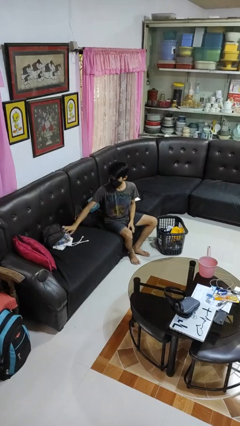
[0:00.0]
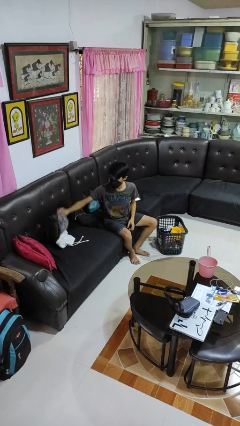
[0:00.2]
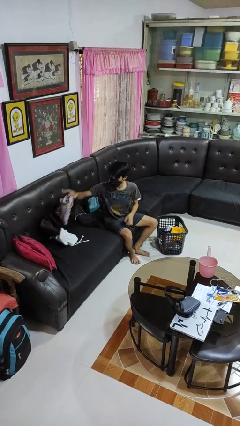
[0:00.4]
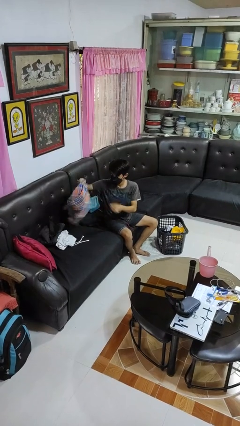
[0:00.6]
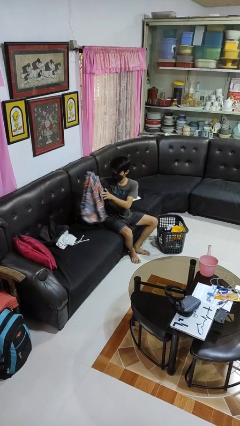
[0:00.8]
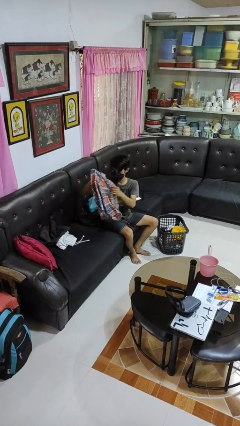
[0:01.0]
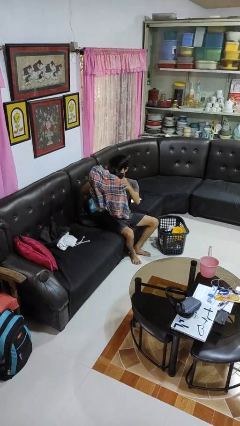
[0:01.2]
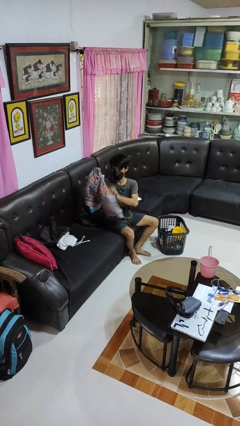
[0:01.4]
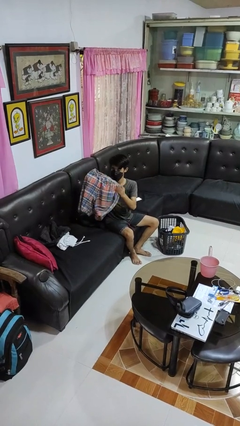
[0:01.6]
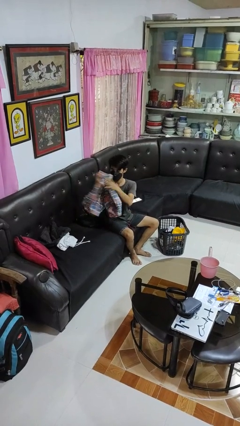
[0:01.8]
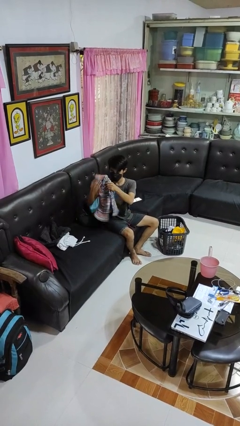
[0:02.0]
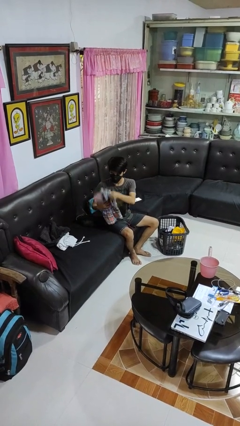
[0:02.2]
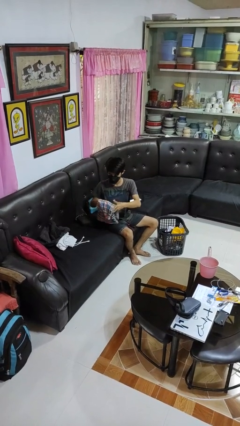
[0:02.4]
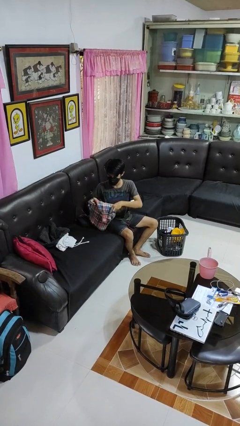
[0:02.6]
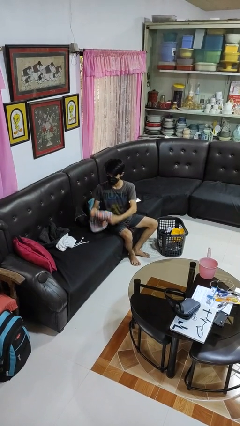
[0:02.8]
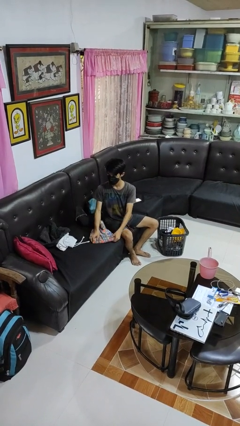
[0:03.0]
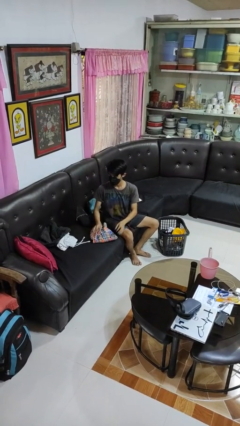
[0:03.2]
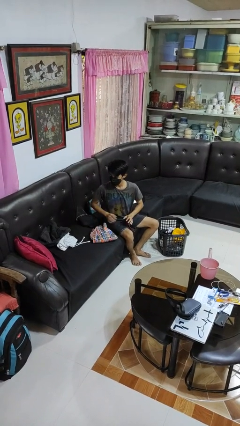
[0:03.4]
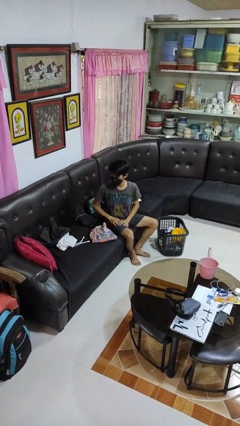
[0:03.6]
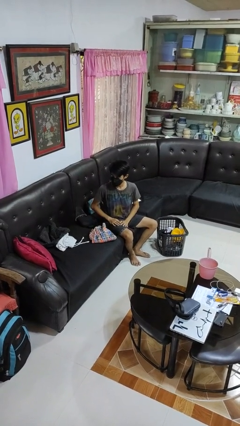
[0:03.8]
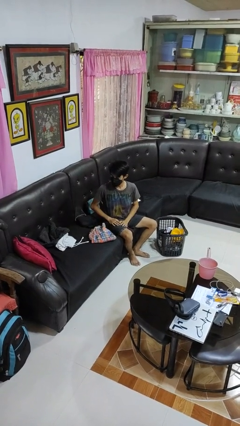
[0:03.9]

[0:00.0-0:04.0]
person folds pants

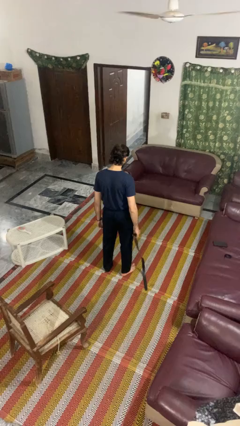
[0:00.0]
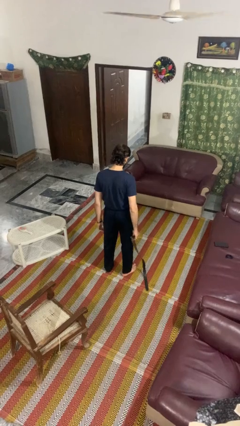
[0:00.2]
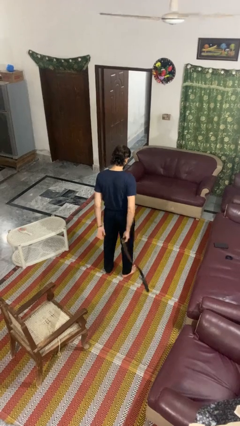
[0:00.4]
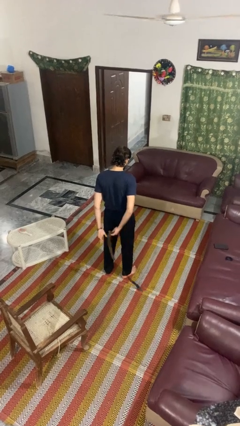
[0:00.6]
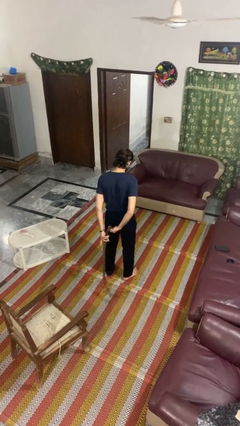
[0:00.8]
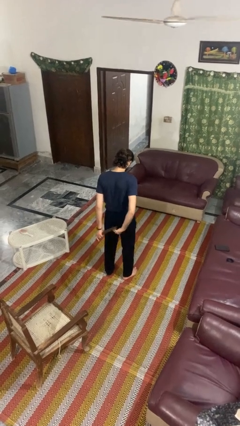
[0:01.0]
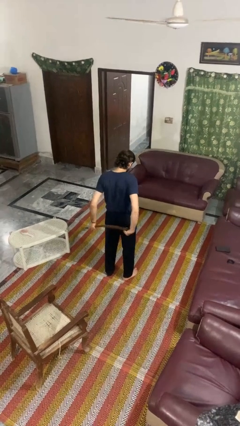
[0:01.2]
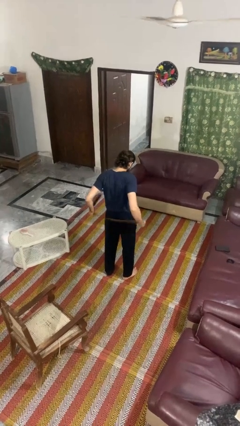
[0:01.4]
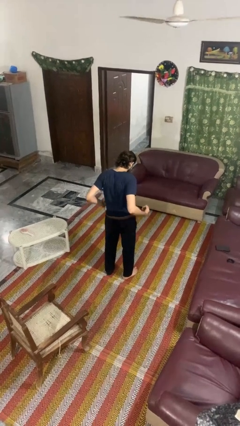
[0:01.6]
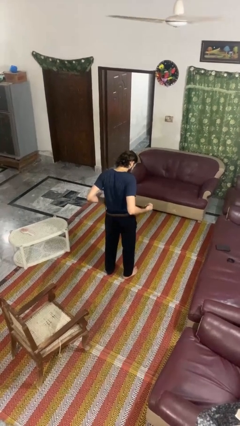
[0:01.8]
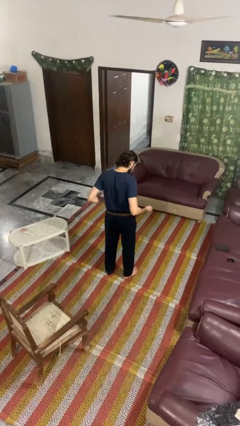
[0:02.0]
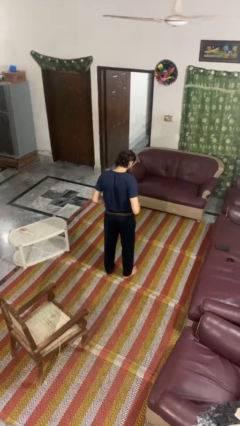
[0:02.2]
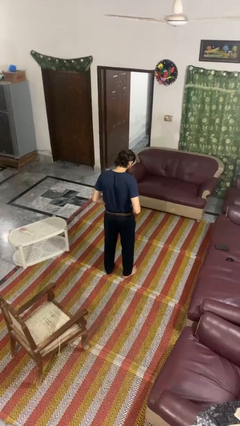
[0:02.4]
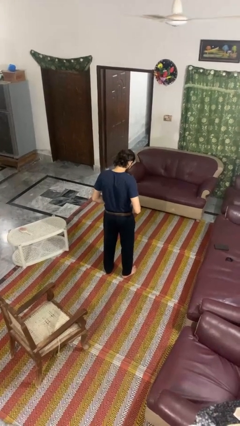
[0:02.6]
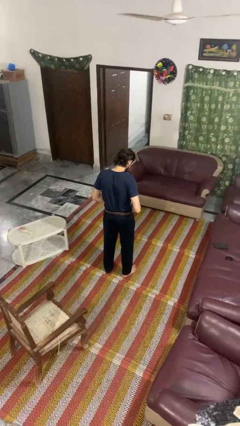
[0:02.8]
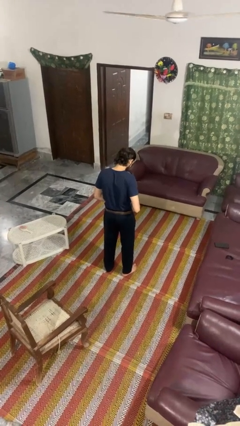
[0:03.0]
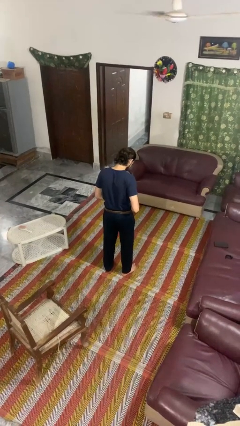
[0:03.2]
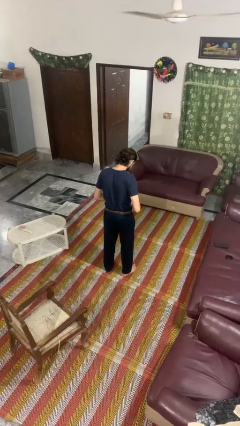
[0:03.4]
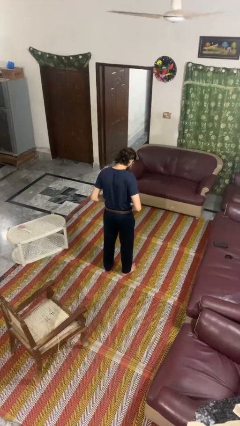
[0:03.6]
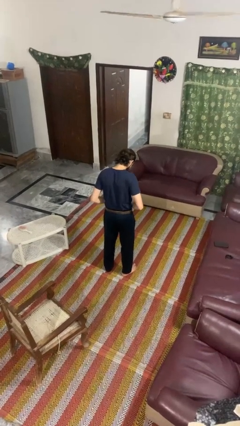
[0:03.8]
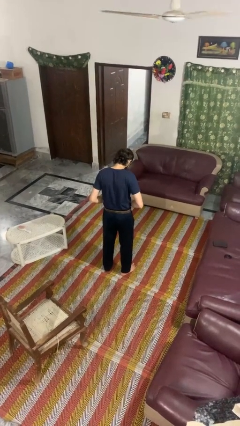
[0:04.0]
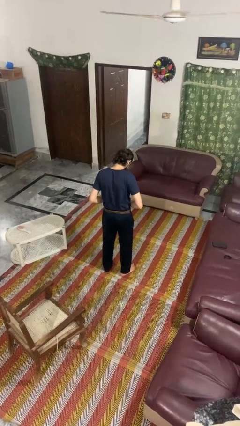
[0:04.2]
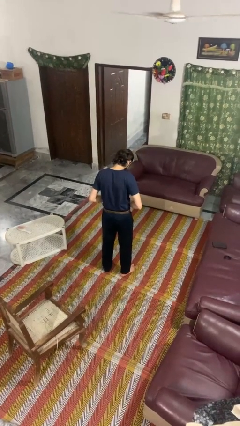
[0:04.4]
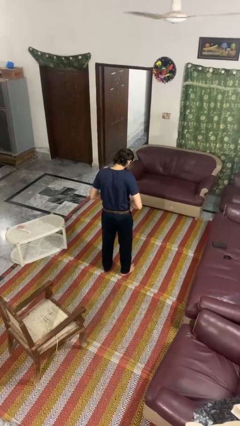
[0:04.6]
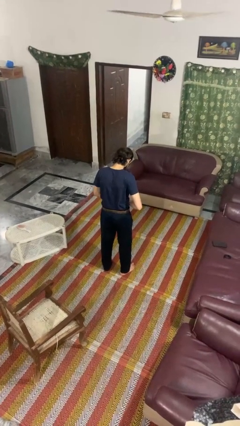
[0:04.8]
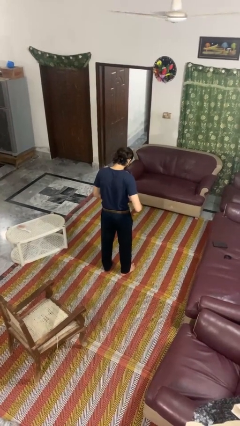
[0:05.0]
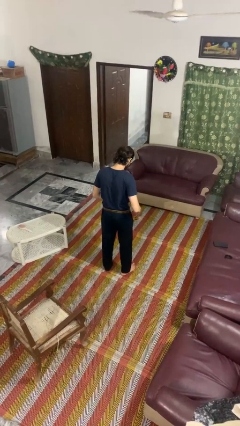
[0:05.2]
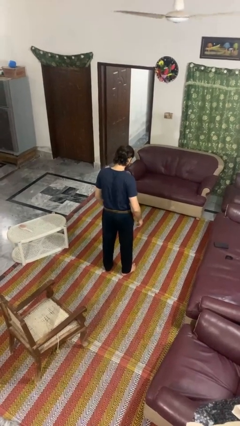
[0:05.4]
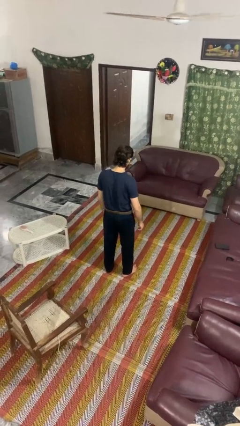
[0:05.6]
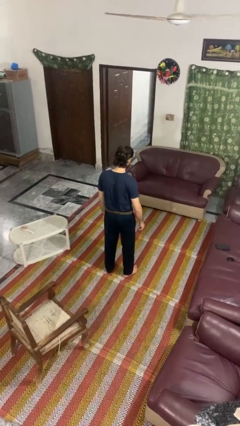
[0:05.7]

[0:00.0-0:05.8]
person puts on belt

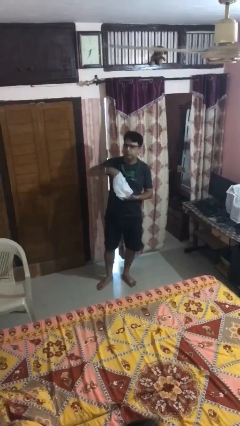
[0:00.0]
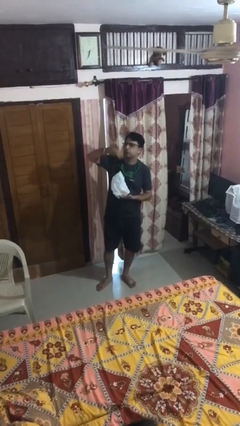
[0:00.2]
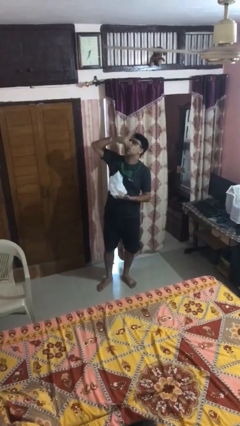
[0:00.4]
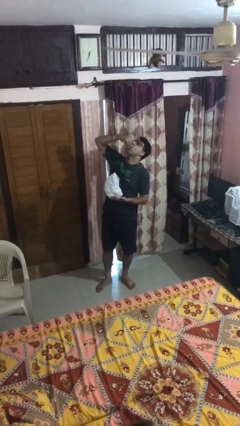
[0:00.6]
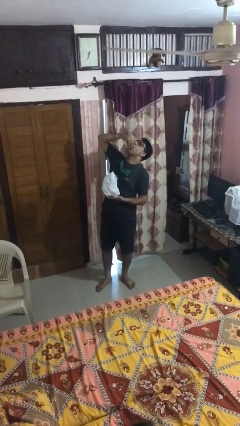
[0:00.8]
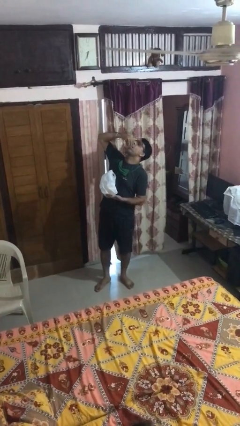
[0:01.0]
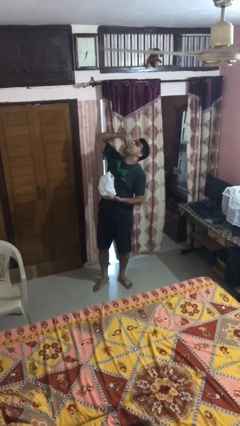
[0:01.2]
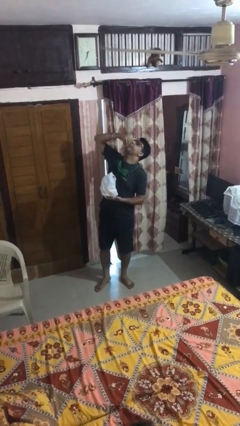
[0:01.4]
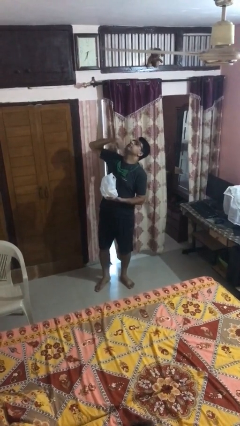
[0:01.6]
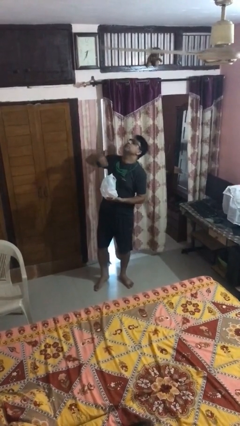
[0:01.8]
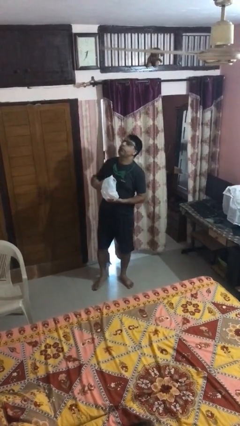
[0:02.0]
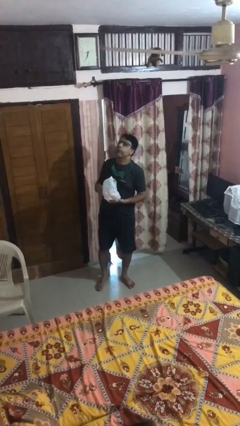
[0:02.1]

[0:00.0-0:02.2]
person eats snack from bag
